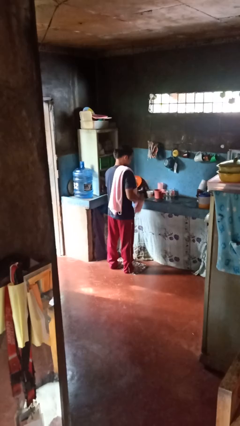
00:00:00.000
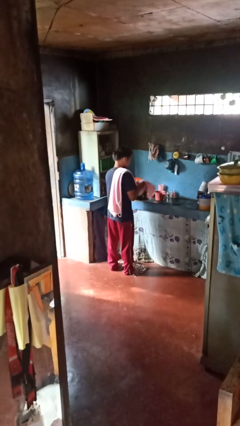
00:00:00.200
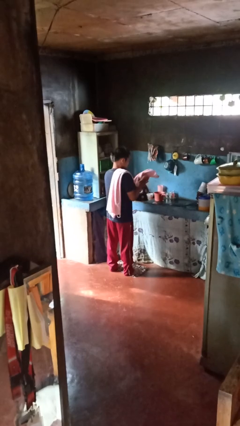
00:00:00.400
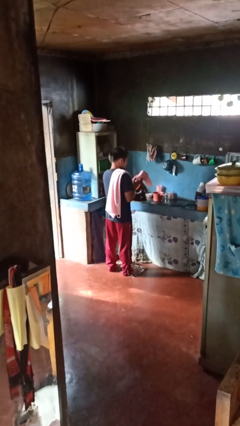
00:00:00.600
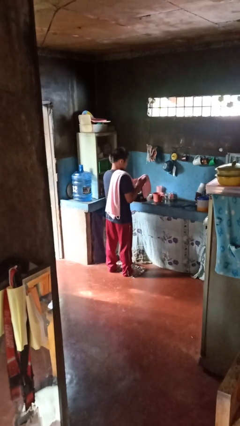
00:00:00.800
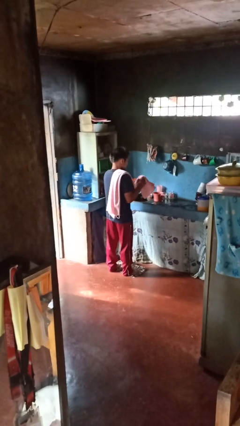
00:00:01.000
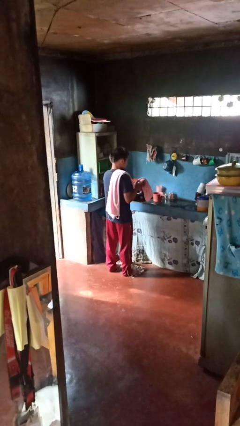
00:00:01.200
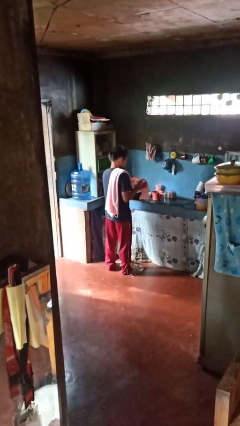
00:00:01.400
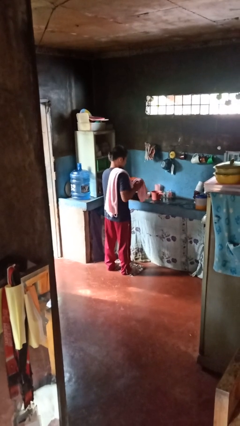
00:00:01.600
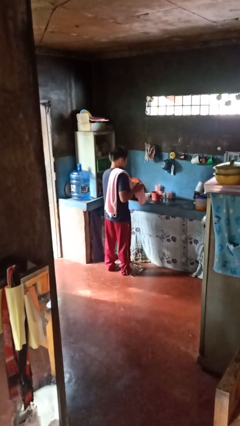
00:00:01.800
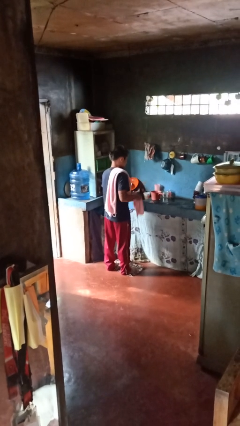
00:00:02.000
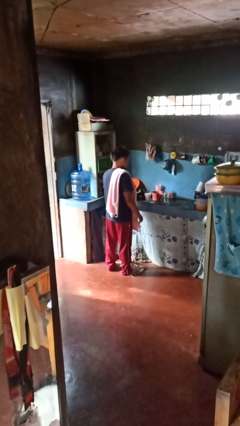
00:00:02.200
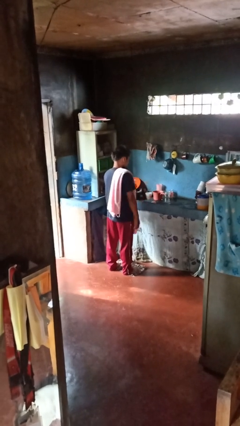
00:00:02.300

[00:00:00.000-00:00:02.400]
person dries hands with towel

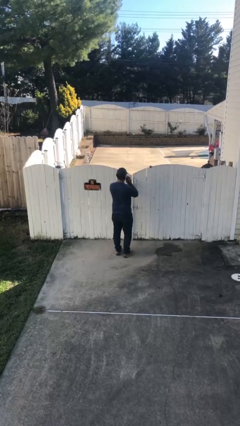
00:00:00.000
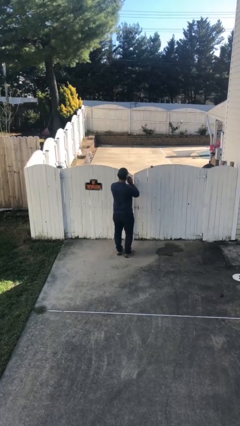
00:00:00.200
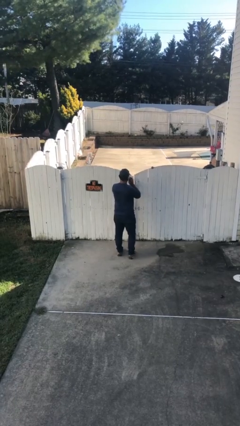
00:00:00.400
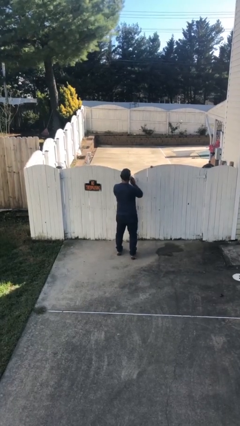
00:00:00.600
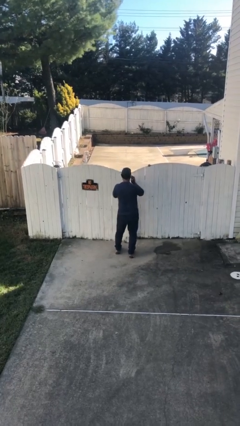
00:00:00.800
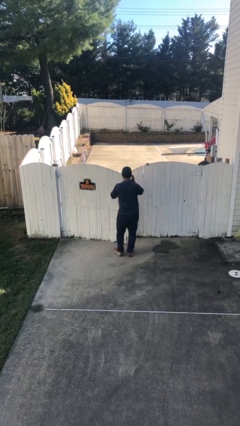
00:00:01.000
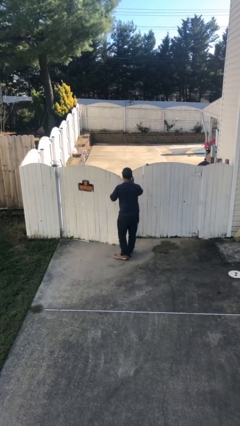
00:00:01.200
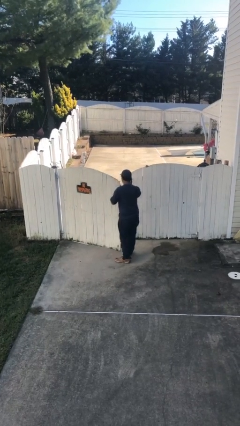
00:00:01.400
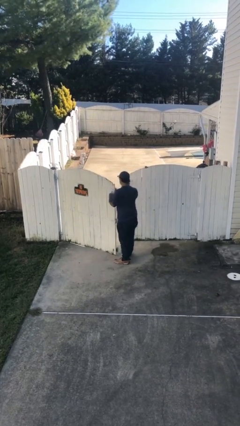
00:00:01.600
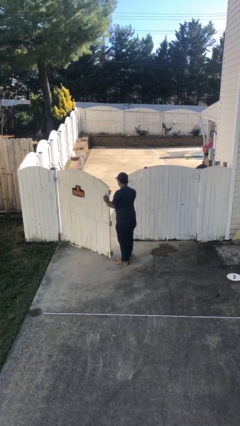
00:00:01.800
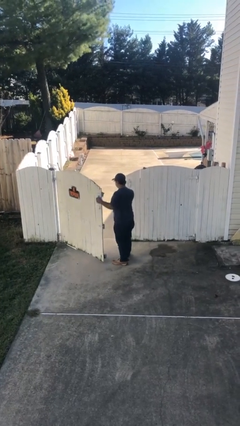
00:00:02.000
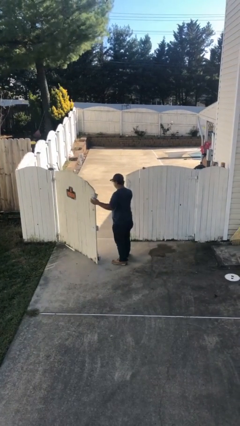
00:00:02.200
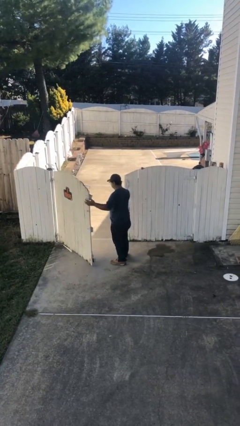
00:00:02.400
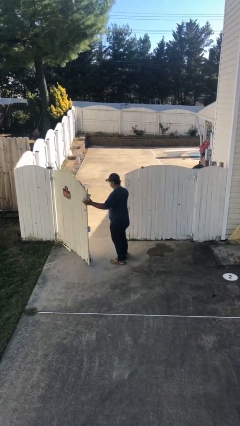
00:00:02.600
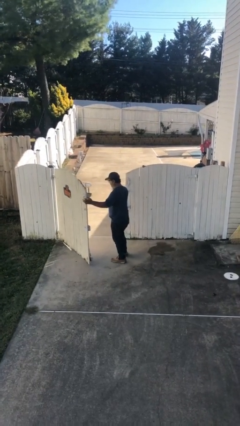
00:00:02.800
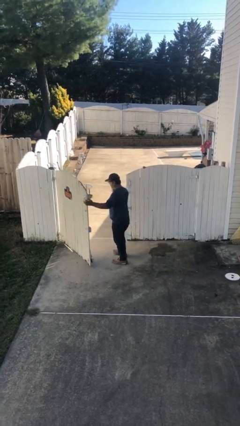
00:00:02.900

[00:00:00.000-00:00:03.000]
person opens facility door

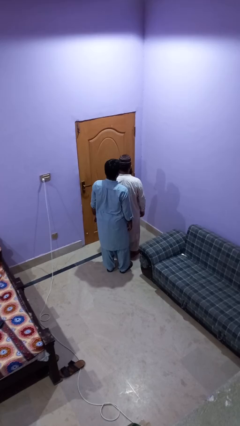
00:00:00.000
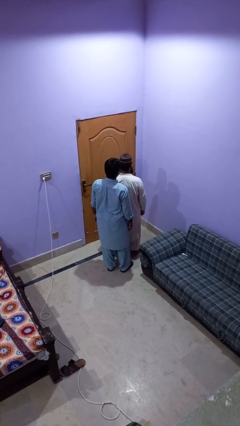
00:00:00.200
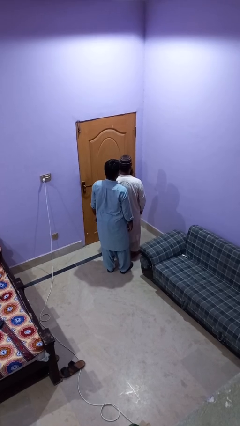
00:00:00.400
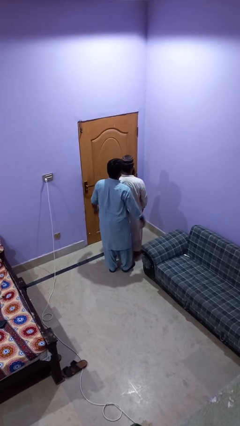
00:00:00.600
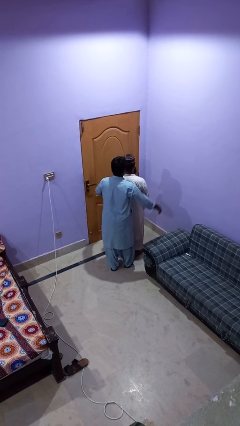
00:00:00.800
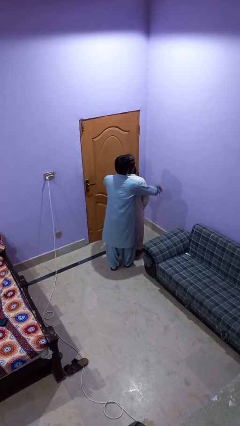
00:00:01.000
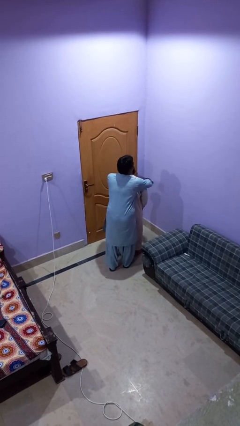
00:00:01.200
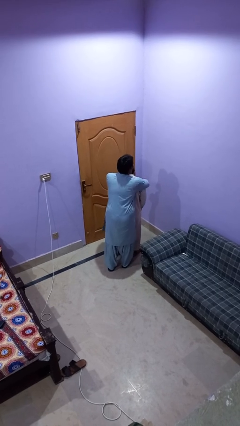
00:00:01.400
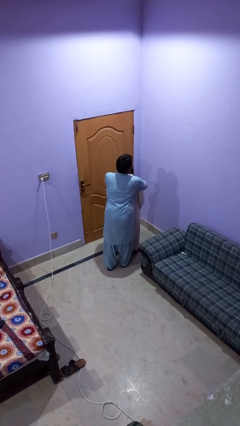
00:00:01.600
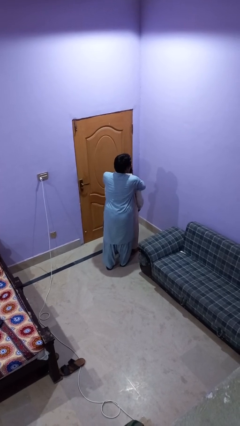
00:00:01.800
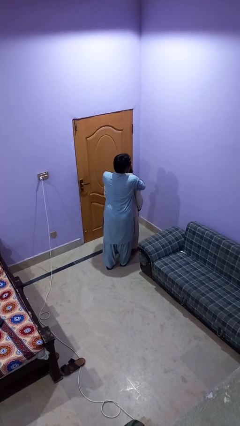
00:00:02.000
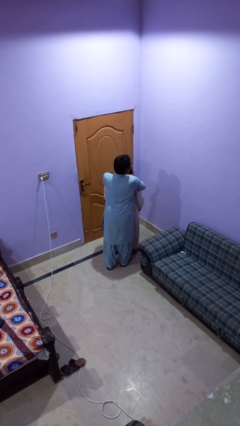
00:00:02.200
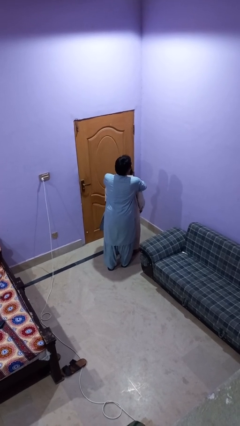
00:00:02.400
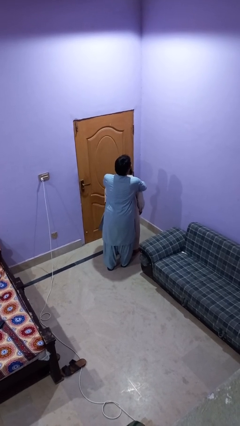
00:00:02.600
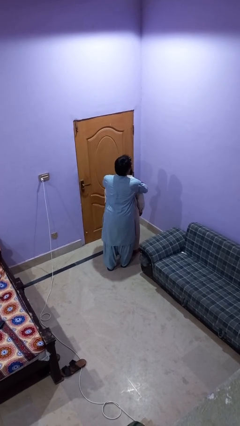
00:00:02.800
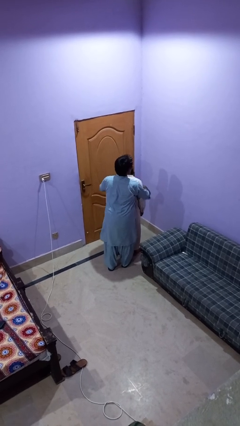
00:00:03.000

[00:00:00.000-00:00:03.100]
person hugs person from behind

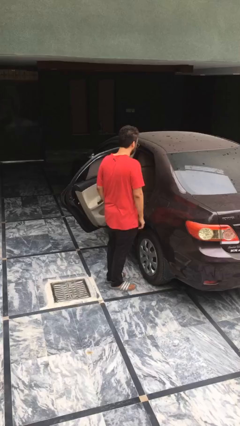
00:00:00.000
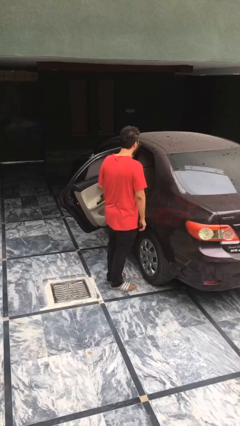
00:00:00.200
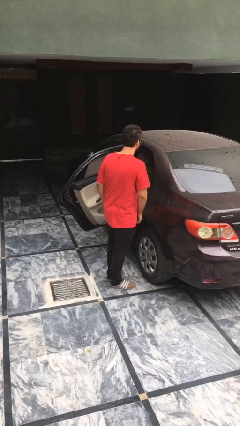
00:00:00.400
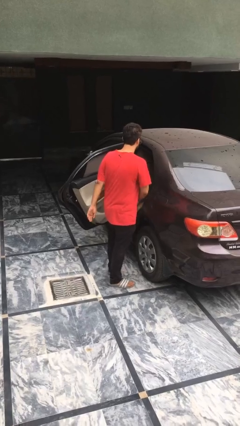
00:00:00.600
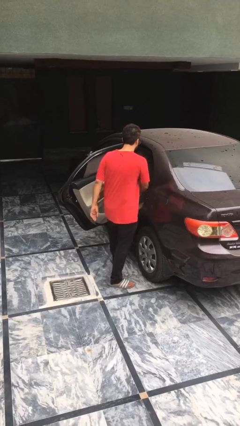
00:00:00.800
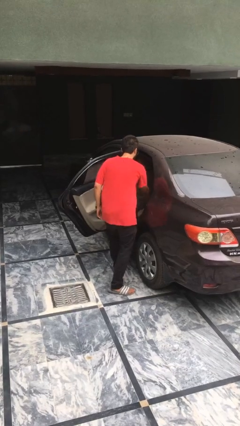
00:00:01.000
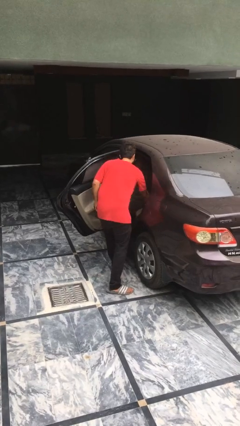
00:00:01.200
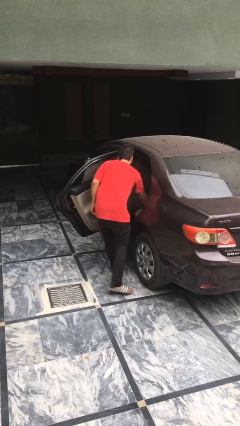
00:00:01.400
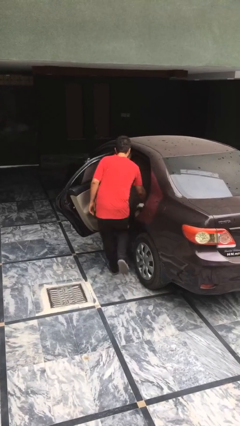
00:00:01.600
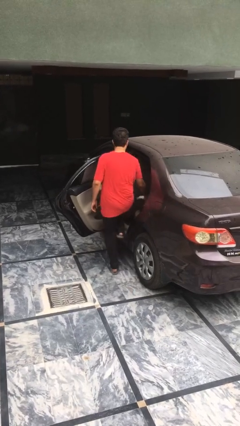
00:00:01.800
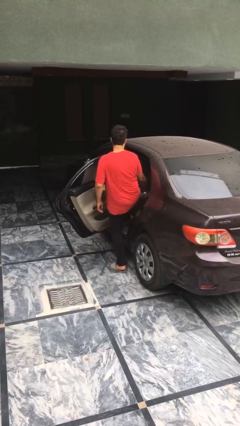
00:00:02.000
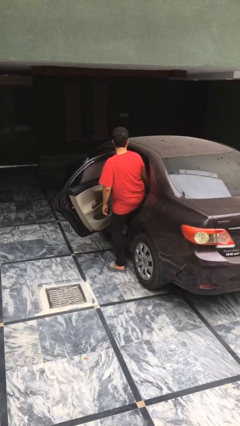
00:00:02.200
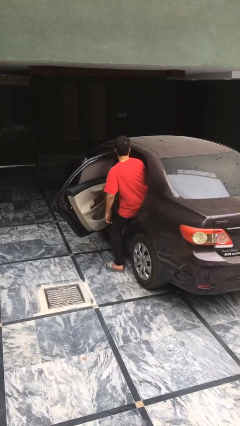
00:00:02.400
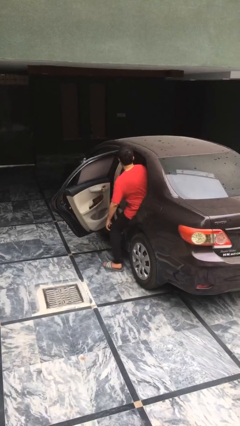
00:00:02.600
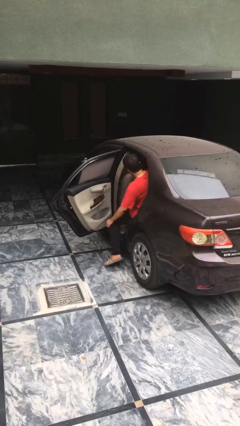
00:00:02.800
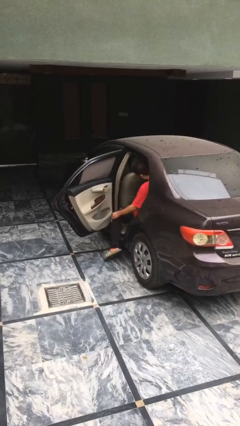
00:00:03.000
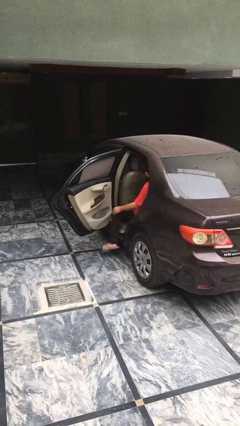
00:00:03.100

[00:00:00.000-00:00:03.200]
person enters car

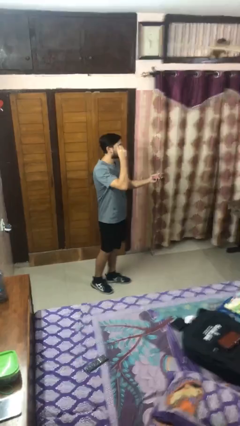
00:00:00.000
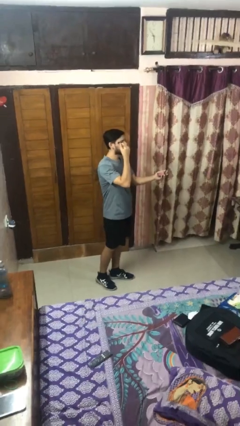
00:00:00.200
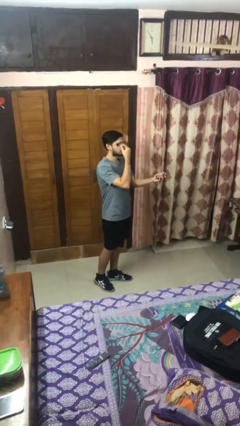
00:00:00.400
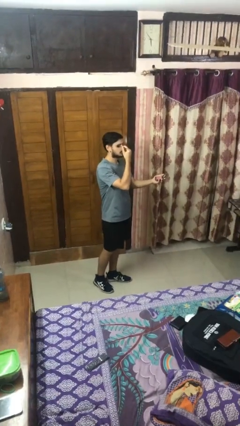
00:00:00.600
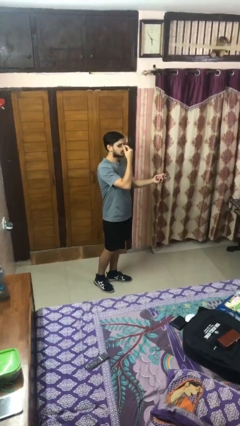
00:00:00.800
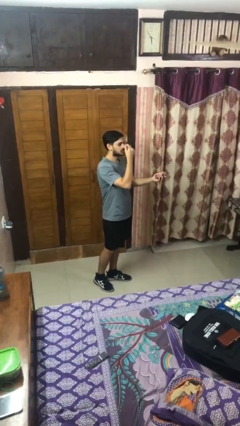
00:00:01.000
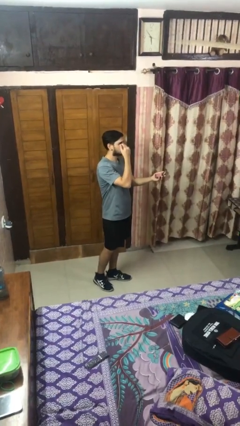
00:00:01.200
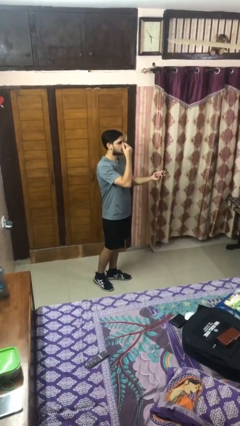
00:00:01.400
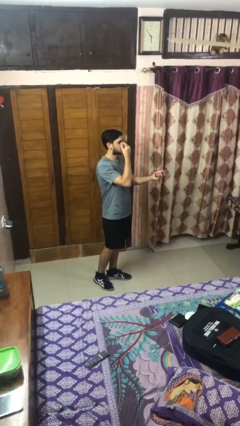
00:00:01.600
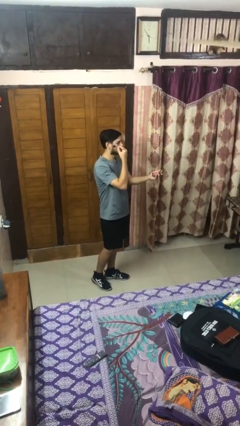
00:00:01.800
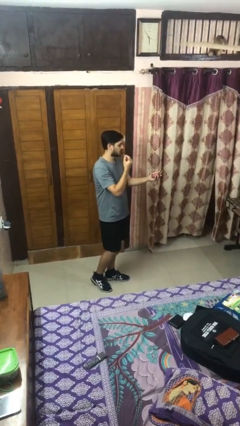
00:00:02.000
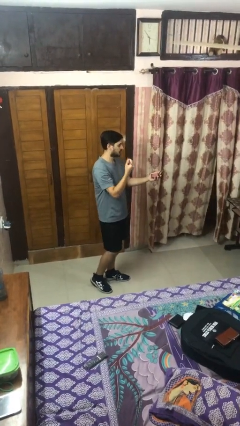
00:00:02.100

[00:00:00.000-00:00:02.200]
person applies eye makeup

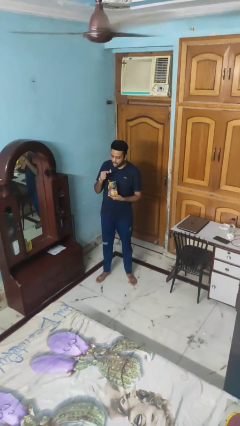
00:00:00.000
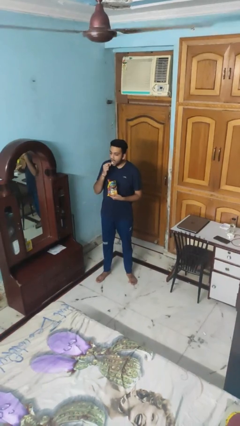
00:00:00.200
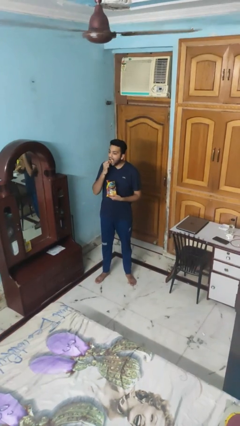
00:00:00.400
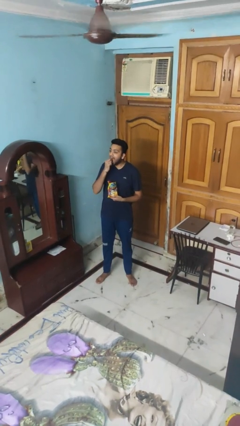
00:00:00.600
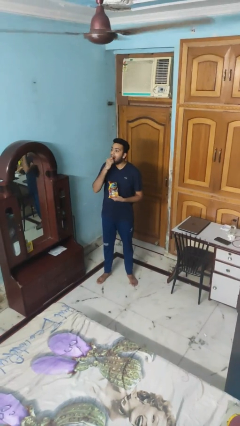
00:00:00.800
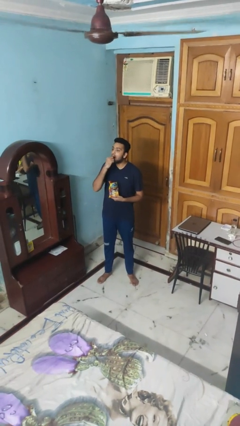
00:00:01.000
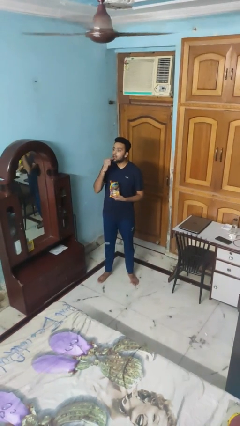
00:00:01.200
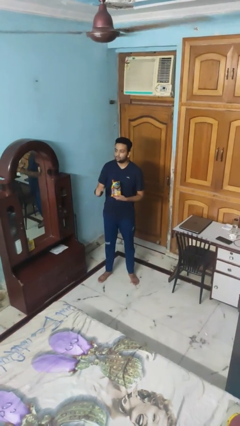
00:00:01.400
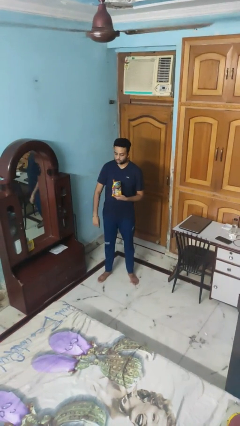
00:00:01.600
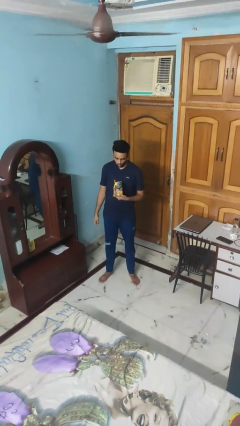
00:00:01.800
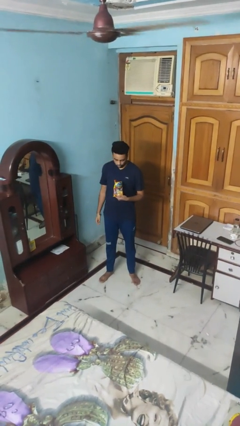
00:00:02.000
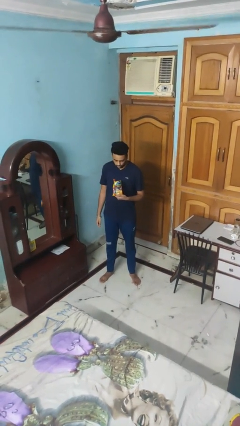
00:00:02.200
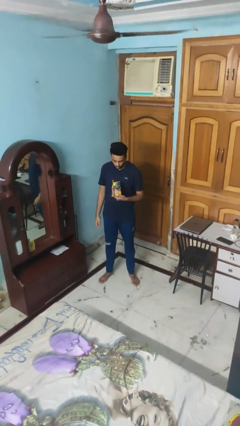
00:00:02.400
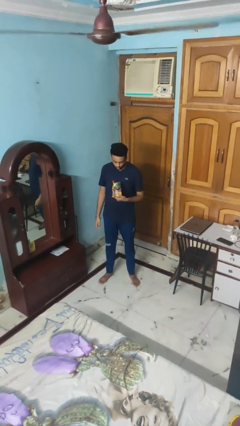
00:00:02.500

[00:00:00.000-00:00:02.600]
person eats snack from bag

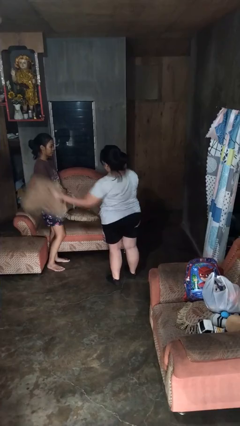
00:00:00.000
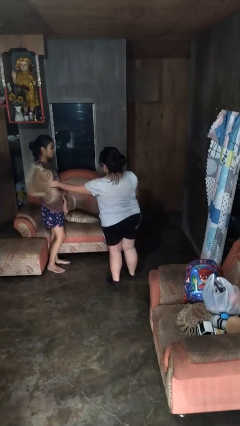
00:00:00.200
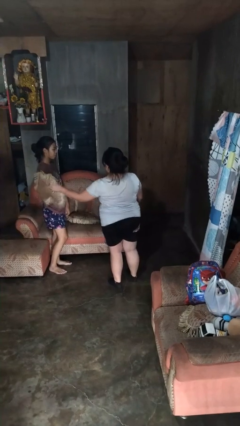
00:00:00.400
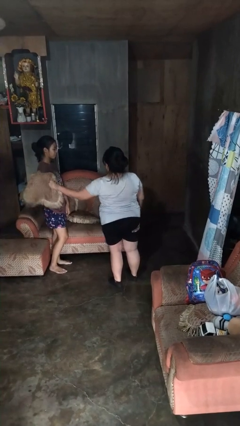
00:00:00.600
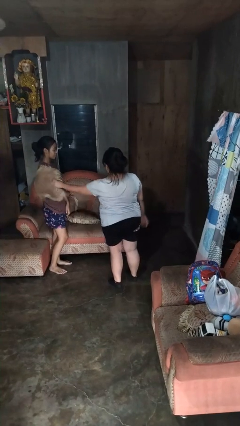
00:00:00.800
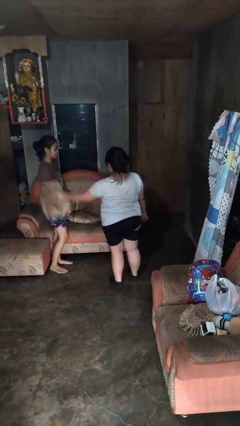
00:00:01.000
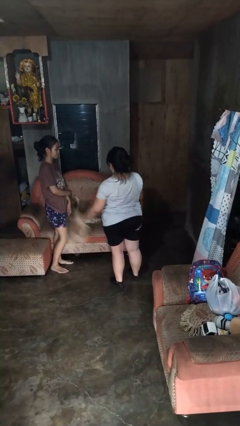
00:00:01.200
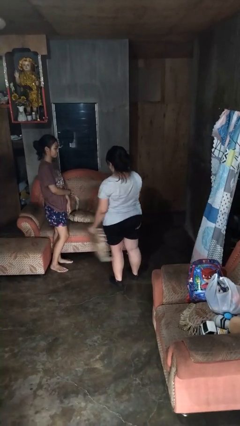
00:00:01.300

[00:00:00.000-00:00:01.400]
person hits person with pillow
